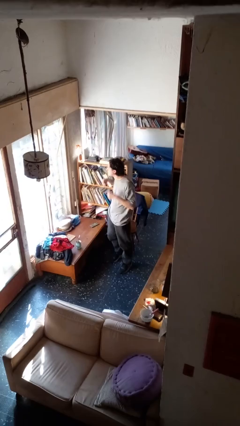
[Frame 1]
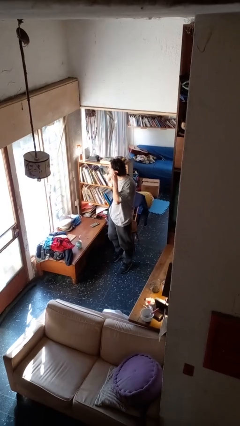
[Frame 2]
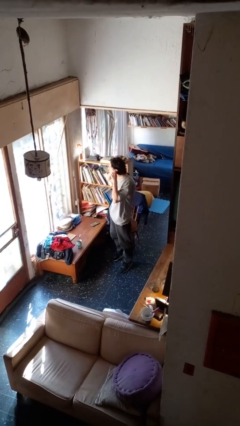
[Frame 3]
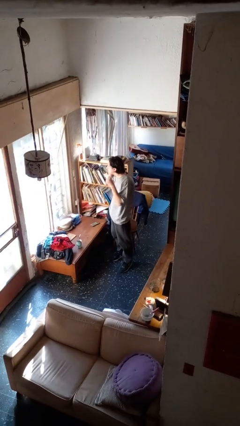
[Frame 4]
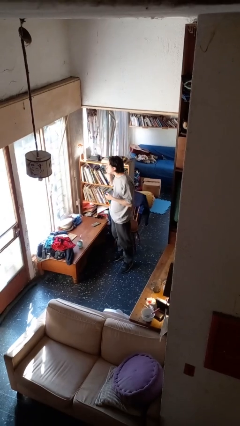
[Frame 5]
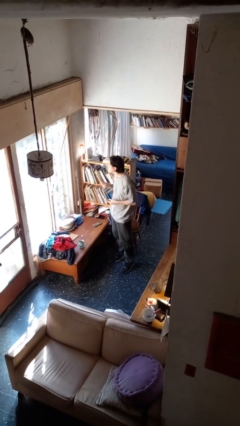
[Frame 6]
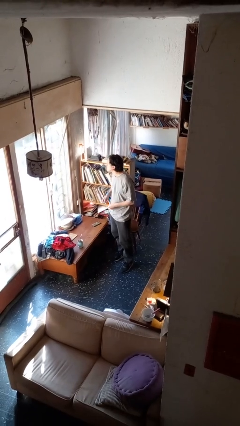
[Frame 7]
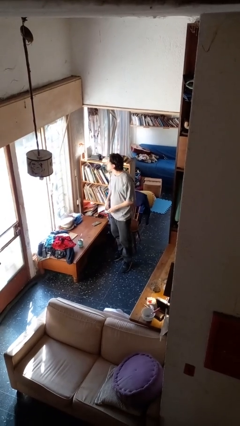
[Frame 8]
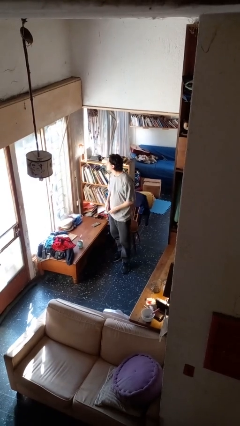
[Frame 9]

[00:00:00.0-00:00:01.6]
person takes off headphones

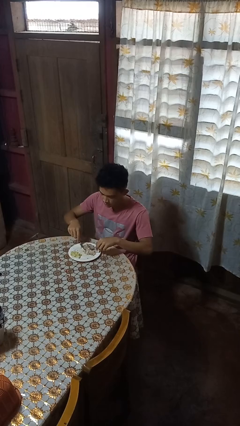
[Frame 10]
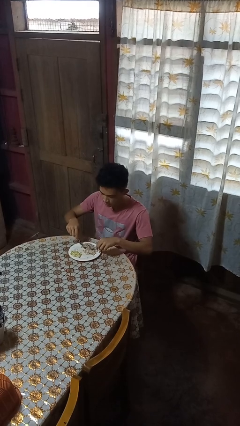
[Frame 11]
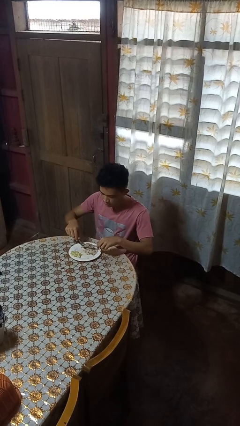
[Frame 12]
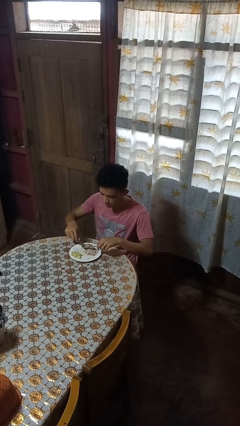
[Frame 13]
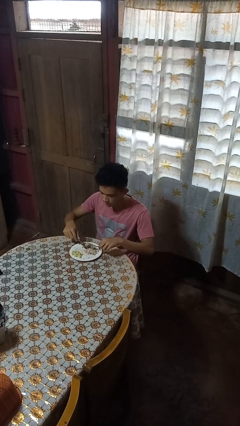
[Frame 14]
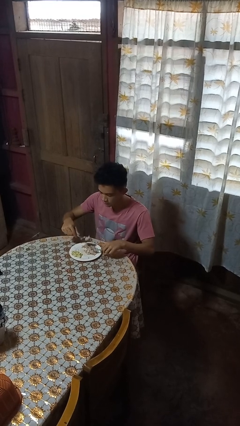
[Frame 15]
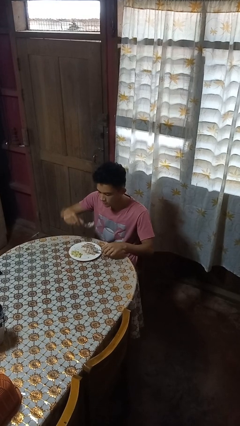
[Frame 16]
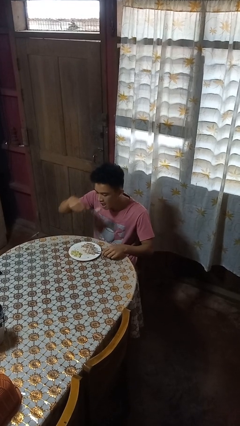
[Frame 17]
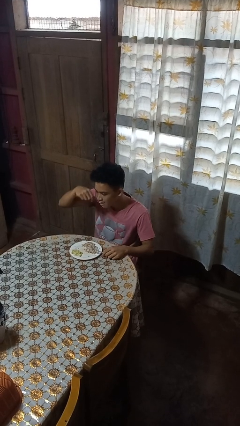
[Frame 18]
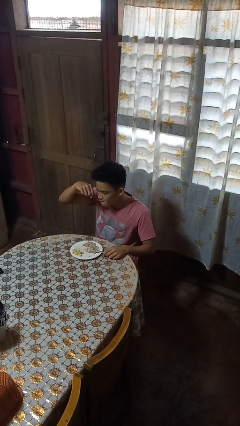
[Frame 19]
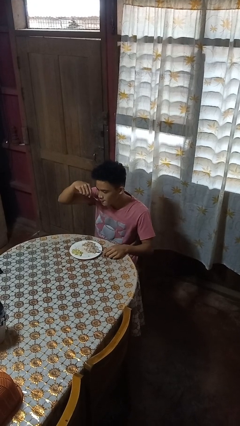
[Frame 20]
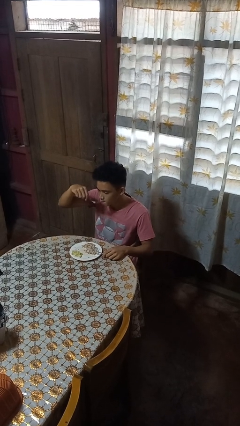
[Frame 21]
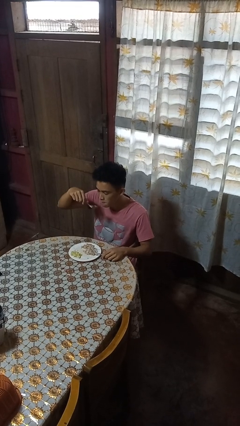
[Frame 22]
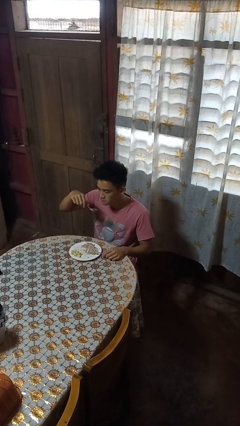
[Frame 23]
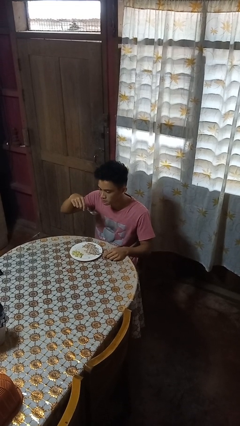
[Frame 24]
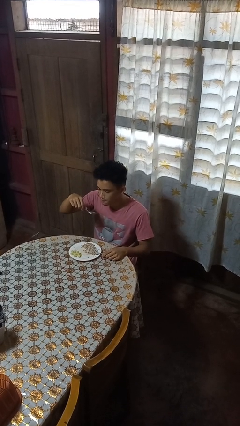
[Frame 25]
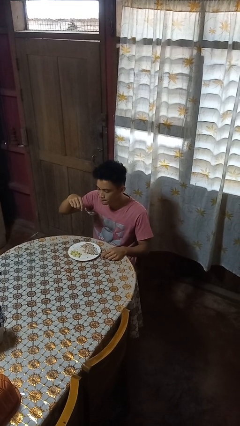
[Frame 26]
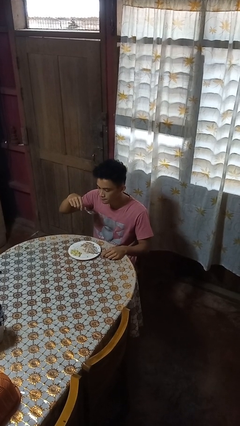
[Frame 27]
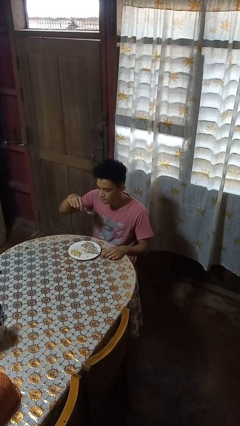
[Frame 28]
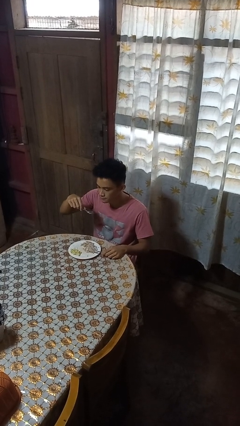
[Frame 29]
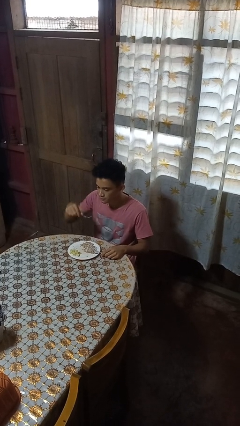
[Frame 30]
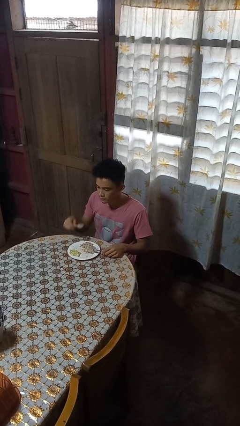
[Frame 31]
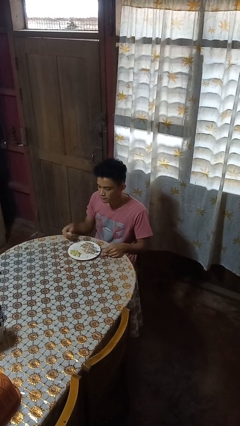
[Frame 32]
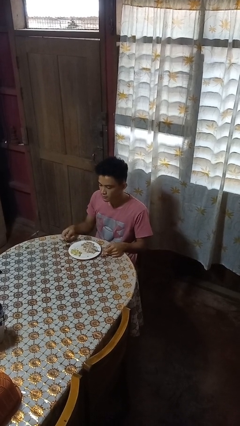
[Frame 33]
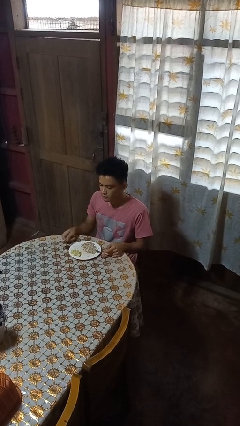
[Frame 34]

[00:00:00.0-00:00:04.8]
person eats with utensil

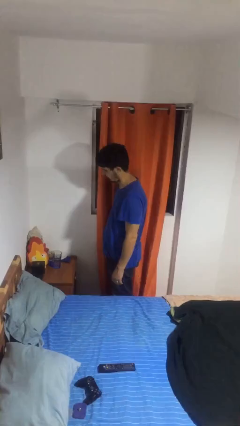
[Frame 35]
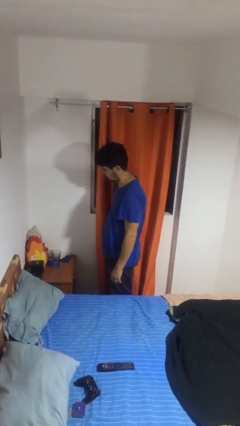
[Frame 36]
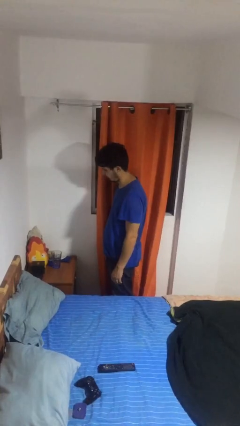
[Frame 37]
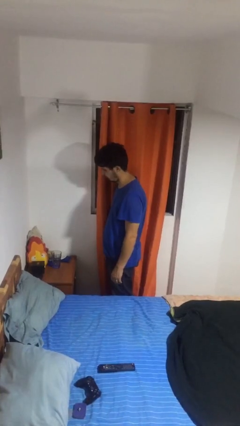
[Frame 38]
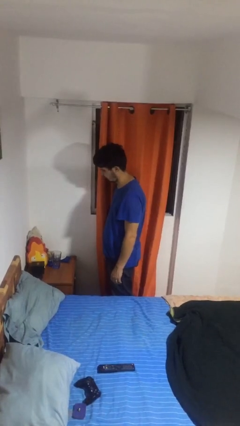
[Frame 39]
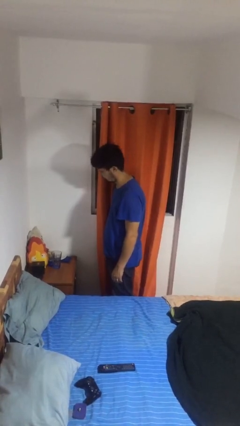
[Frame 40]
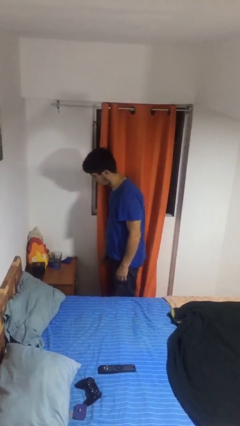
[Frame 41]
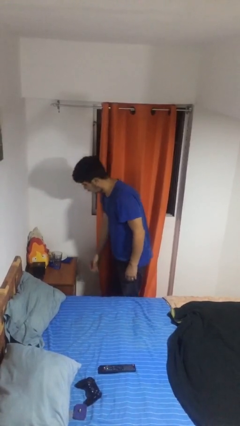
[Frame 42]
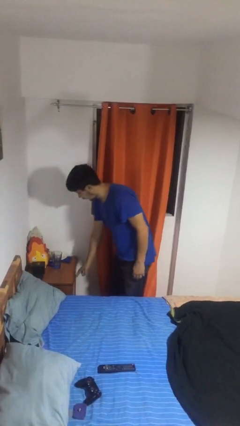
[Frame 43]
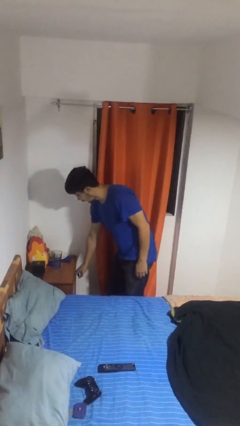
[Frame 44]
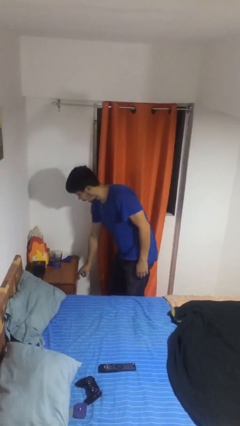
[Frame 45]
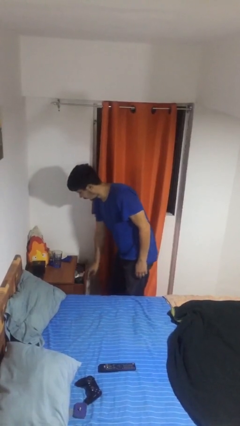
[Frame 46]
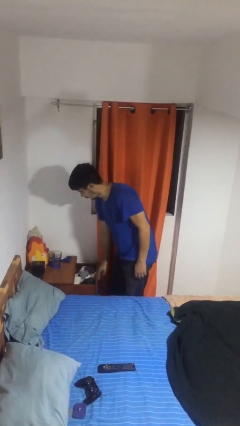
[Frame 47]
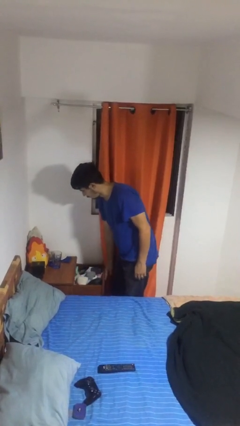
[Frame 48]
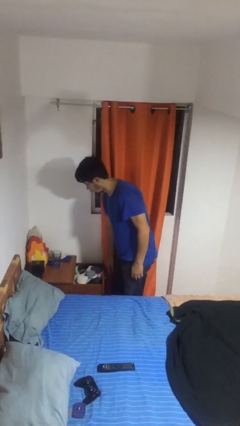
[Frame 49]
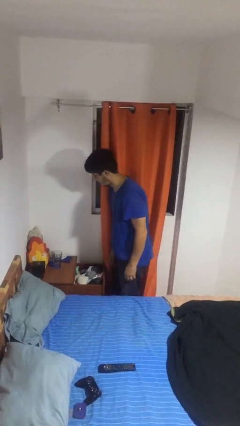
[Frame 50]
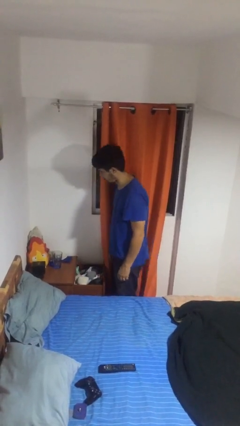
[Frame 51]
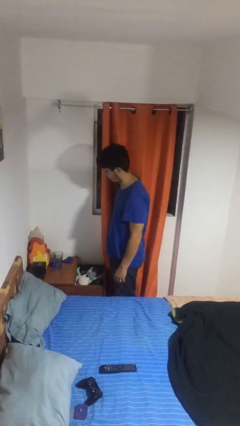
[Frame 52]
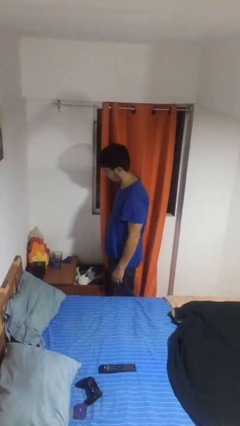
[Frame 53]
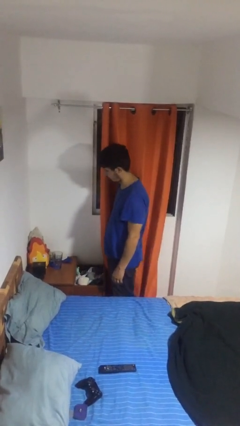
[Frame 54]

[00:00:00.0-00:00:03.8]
person opens dresser drawer

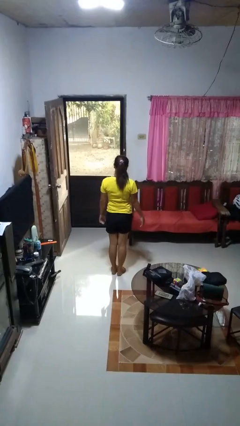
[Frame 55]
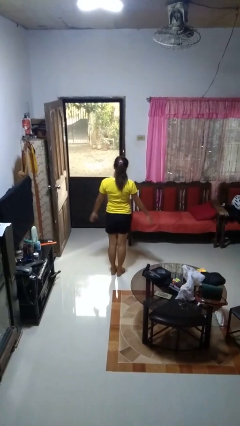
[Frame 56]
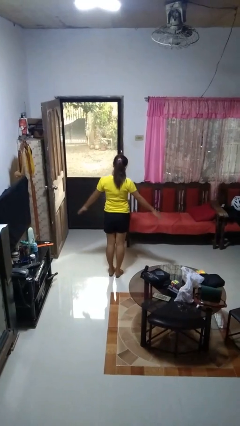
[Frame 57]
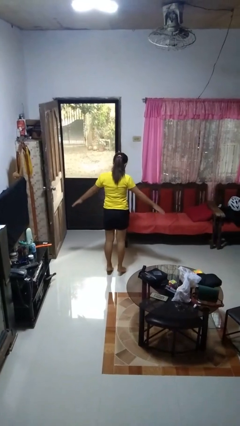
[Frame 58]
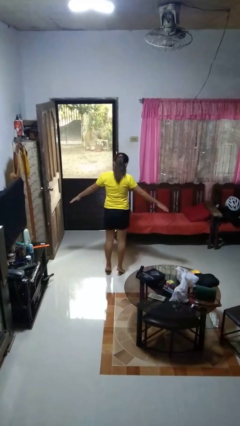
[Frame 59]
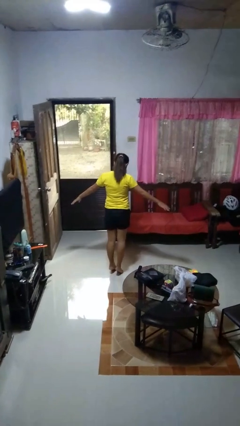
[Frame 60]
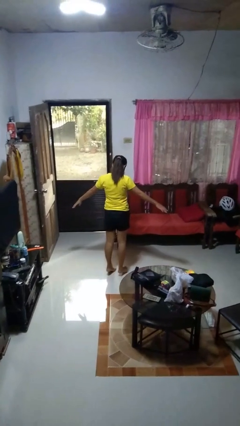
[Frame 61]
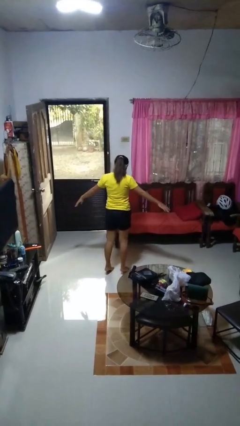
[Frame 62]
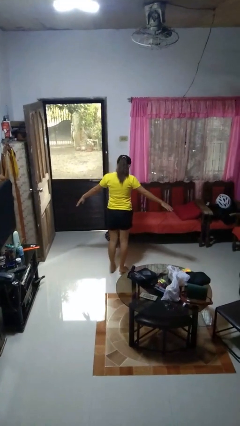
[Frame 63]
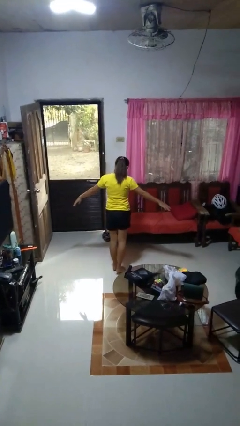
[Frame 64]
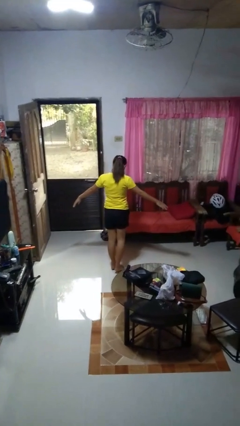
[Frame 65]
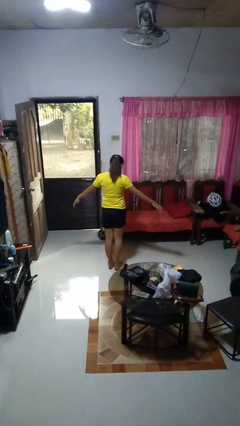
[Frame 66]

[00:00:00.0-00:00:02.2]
person walks tiptoe

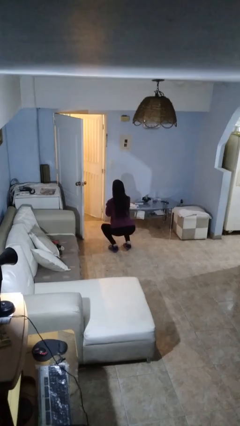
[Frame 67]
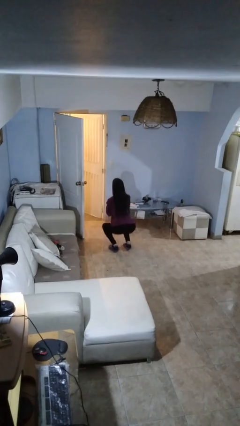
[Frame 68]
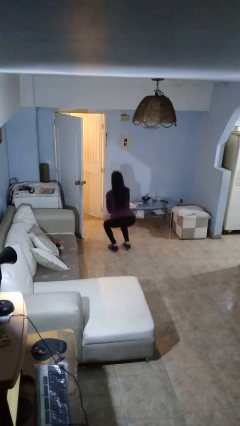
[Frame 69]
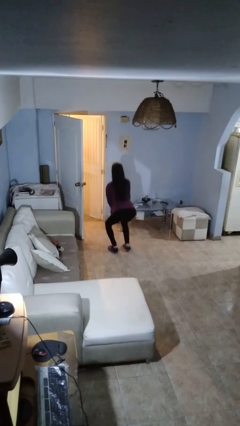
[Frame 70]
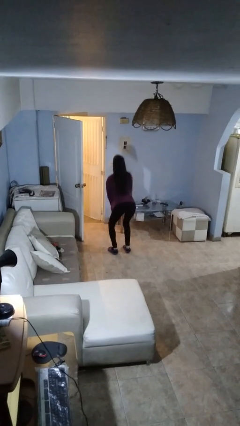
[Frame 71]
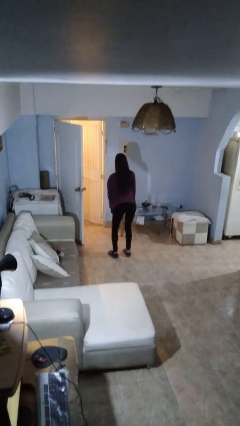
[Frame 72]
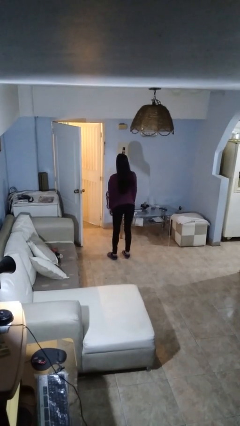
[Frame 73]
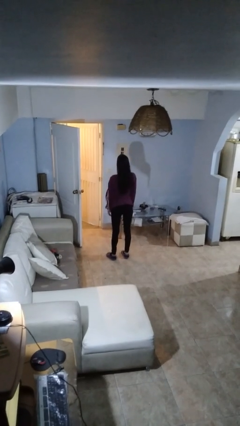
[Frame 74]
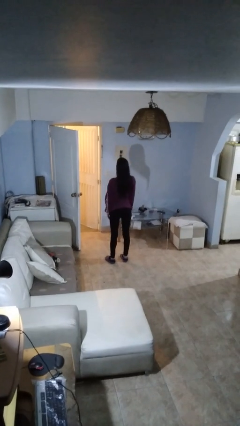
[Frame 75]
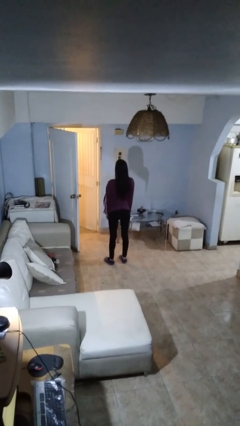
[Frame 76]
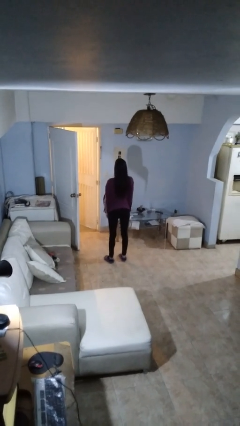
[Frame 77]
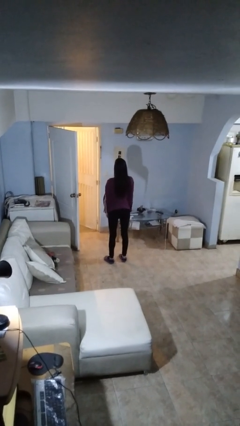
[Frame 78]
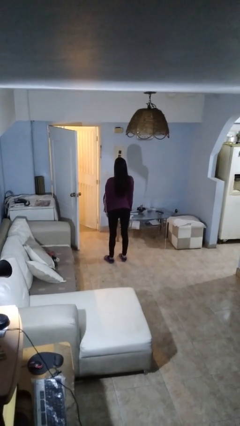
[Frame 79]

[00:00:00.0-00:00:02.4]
person stands up

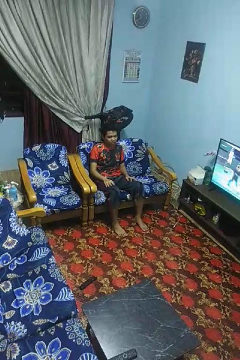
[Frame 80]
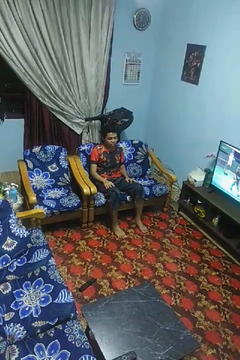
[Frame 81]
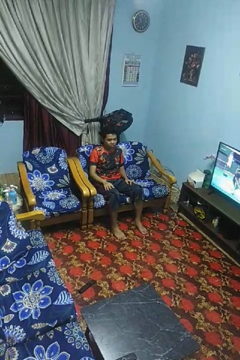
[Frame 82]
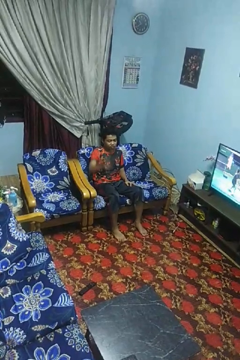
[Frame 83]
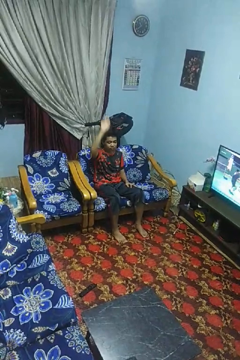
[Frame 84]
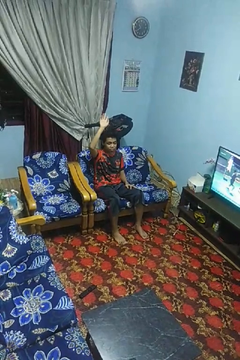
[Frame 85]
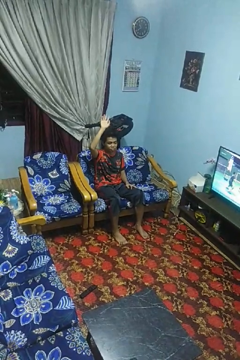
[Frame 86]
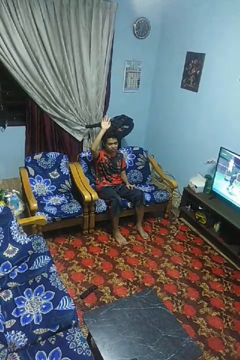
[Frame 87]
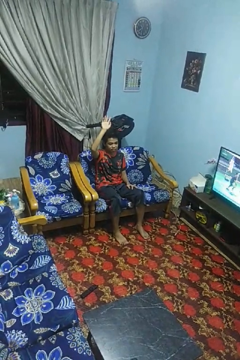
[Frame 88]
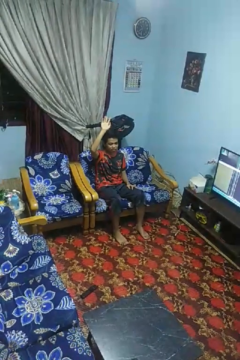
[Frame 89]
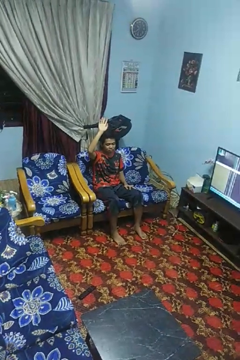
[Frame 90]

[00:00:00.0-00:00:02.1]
person gestures raise hand

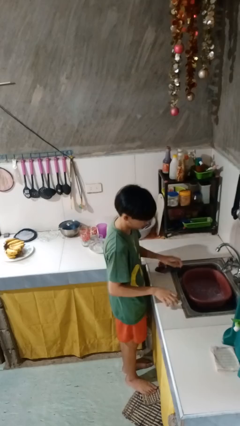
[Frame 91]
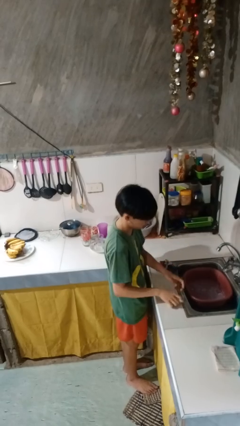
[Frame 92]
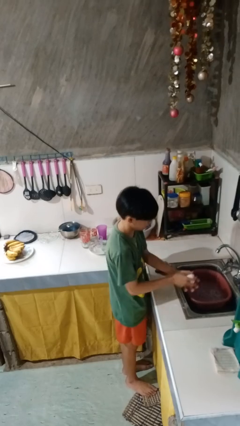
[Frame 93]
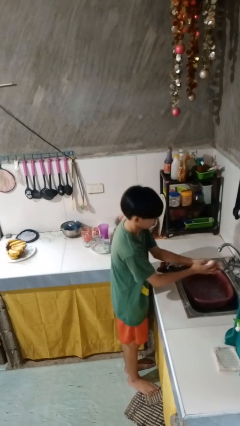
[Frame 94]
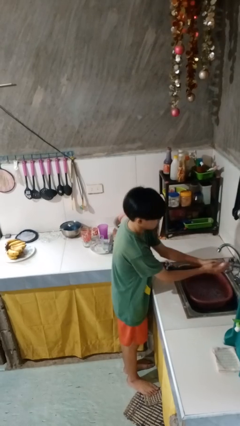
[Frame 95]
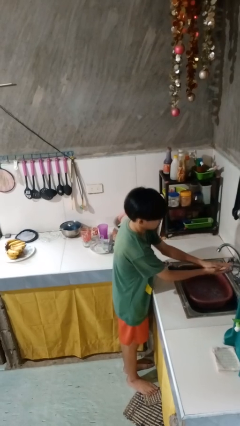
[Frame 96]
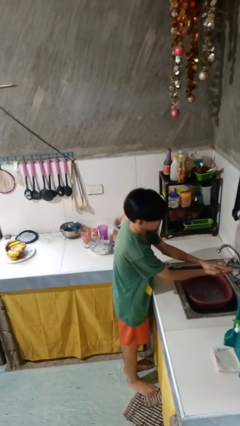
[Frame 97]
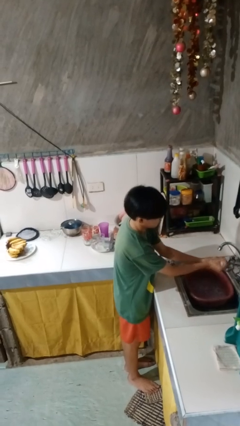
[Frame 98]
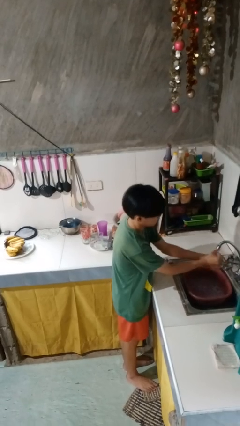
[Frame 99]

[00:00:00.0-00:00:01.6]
person washes hands
